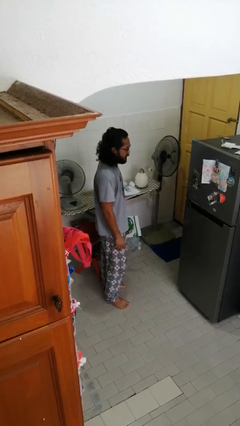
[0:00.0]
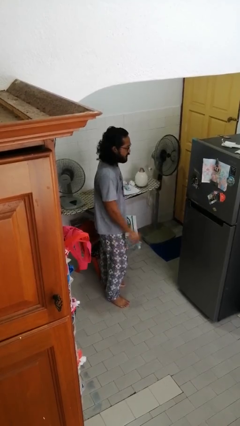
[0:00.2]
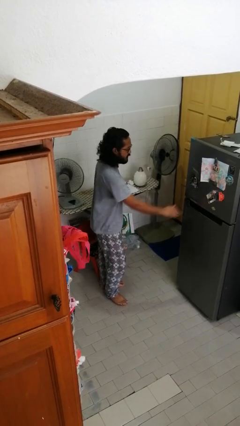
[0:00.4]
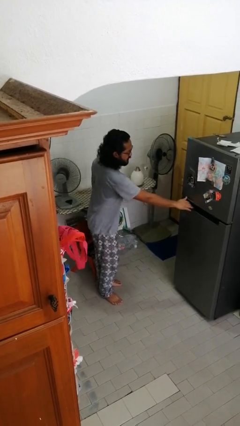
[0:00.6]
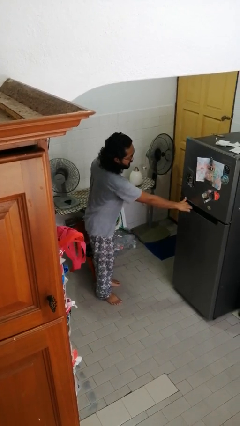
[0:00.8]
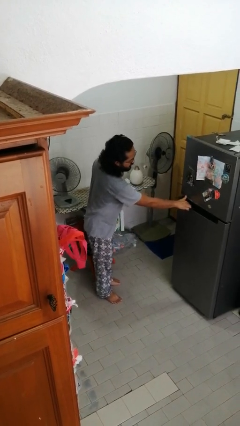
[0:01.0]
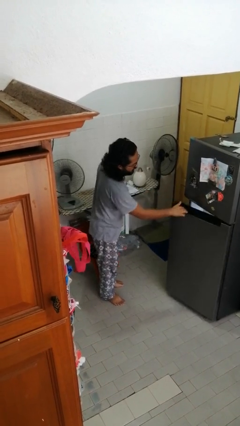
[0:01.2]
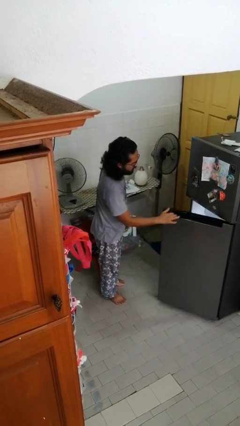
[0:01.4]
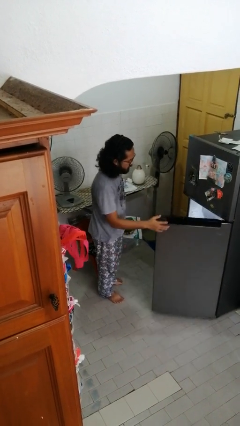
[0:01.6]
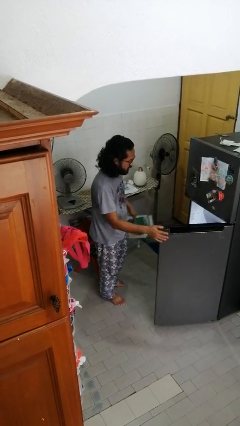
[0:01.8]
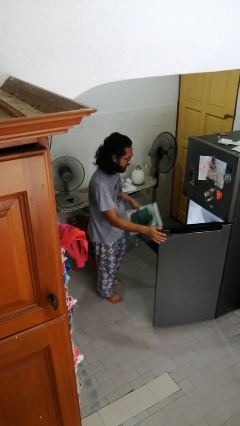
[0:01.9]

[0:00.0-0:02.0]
person opens refrigerator

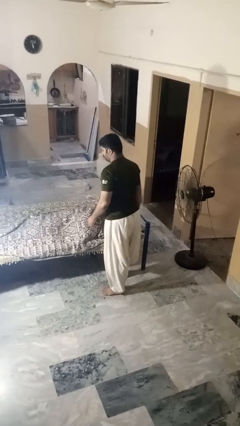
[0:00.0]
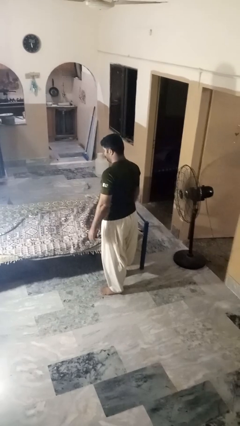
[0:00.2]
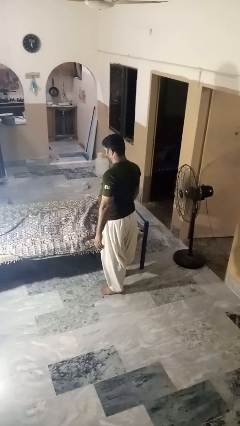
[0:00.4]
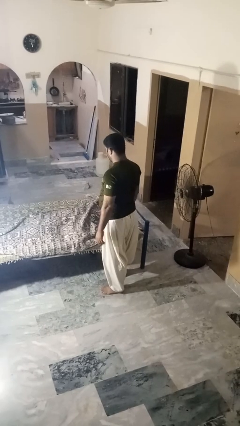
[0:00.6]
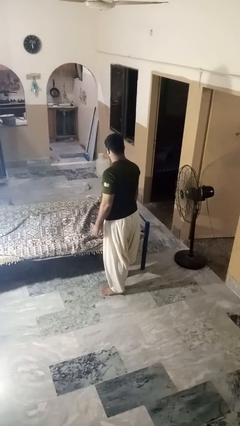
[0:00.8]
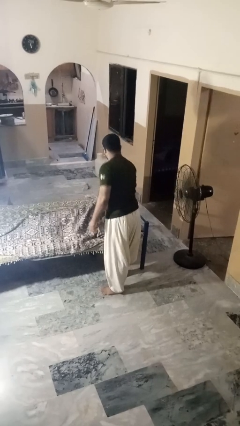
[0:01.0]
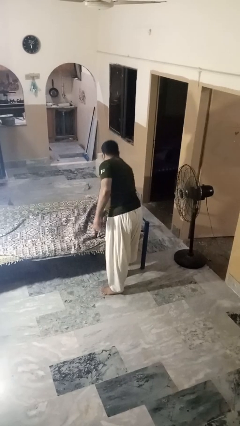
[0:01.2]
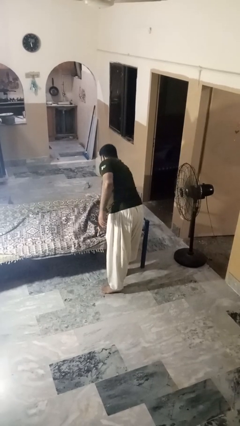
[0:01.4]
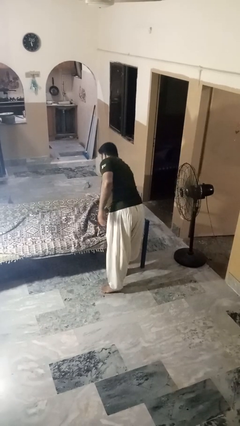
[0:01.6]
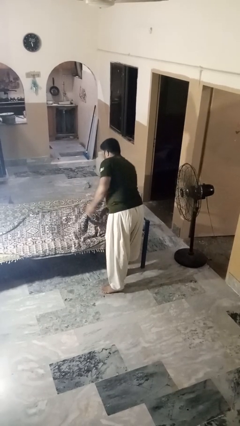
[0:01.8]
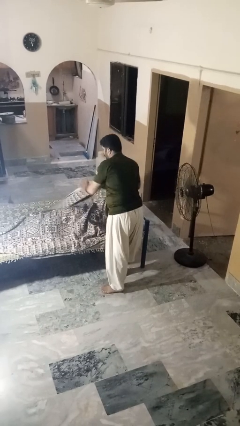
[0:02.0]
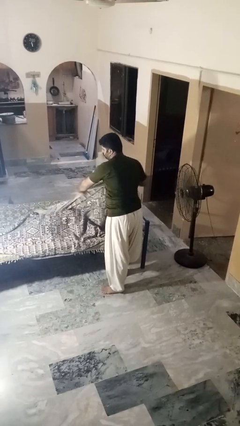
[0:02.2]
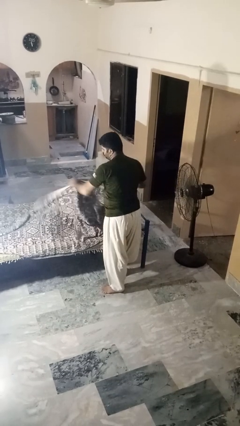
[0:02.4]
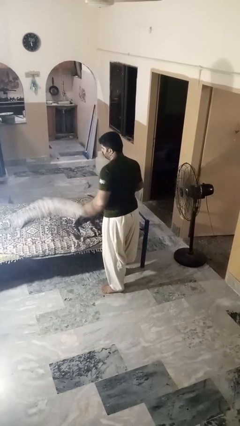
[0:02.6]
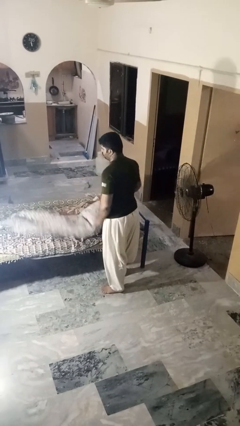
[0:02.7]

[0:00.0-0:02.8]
person uncovers friend with blanket

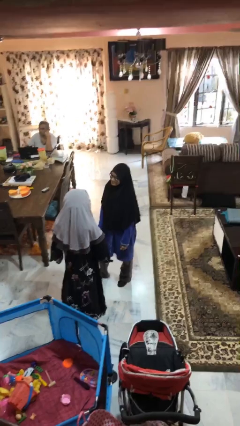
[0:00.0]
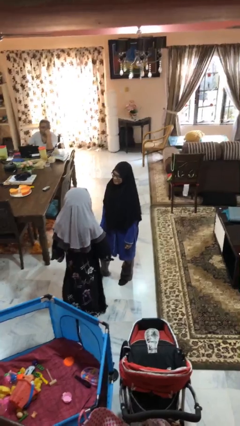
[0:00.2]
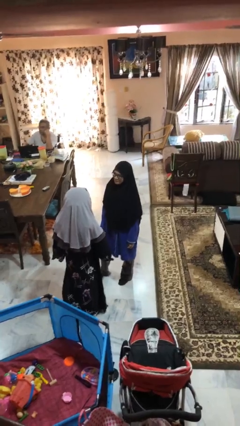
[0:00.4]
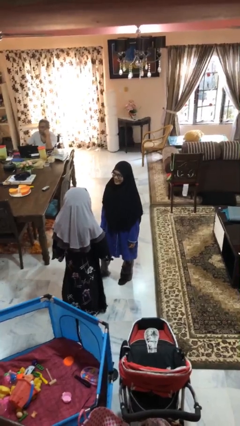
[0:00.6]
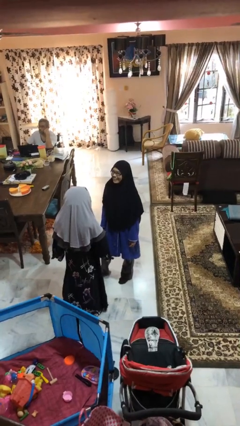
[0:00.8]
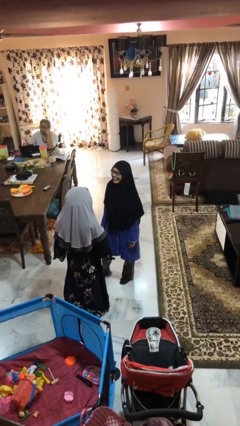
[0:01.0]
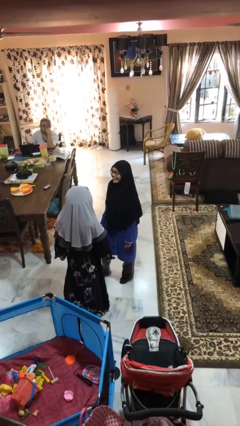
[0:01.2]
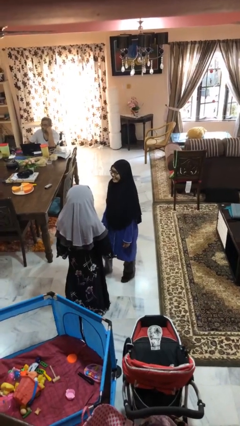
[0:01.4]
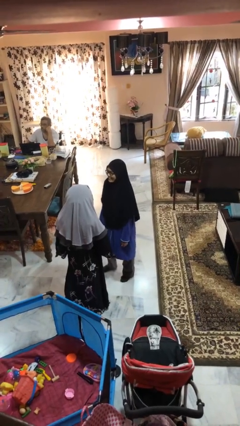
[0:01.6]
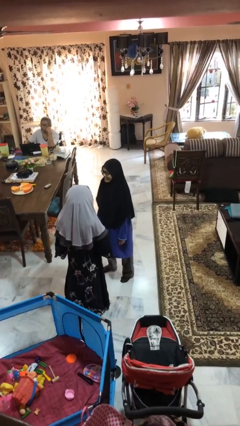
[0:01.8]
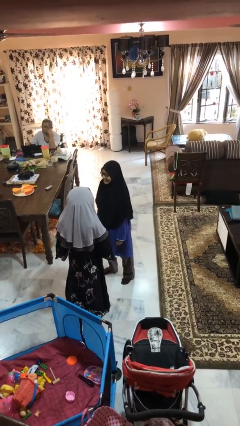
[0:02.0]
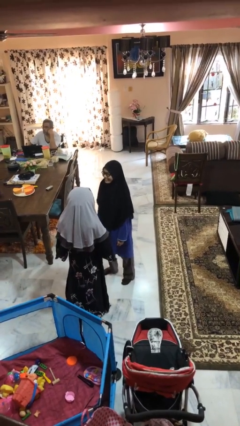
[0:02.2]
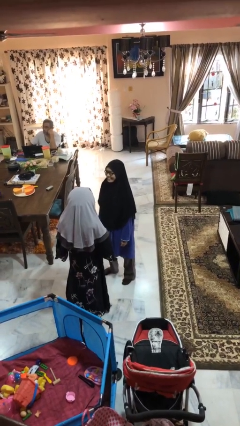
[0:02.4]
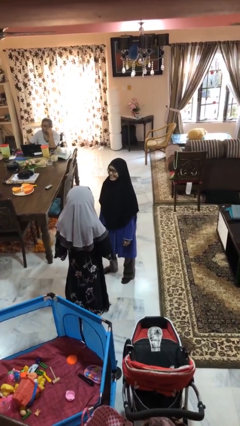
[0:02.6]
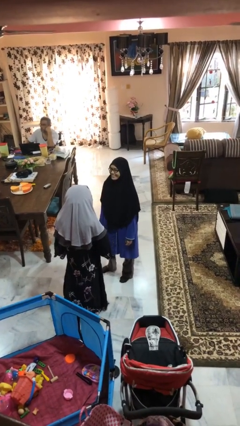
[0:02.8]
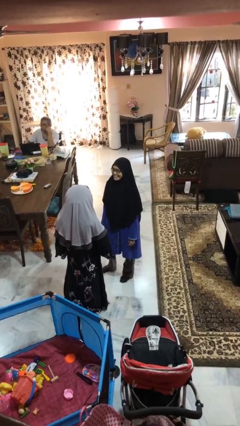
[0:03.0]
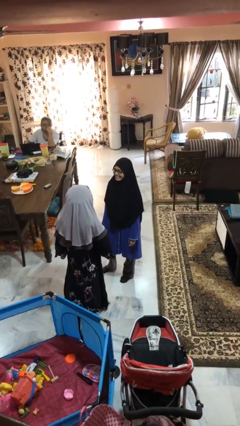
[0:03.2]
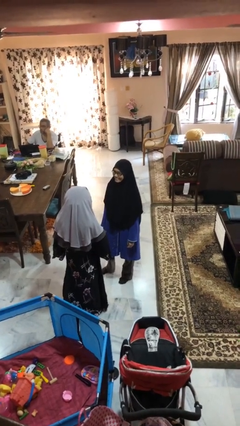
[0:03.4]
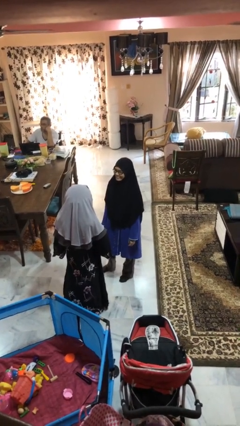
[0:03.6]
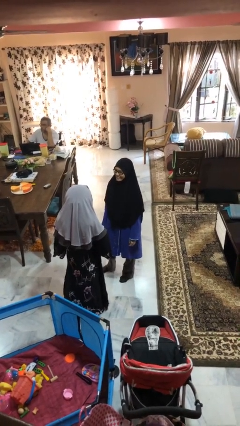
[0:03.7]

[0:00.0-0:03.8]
person laughs with person

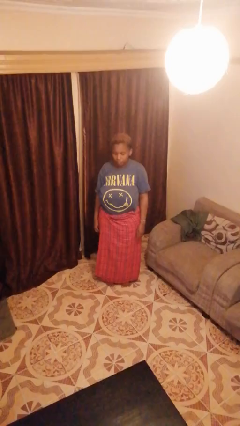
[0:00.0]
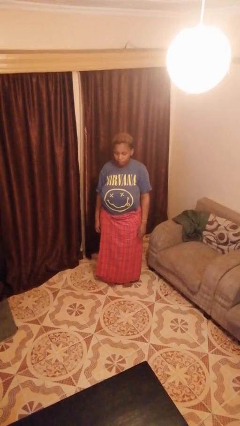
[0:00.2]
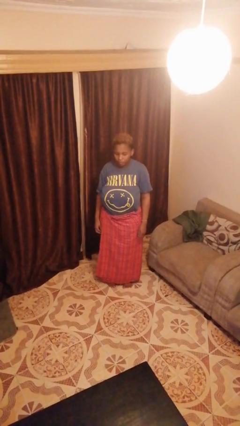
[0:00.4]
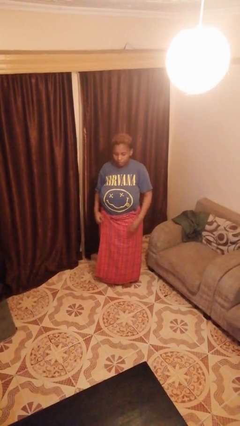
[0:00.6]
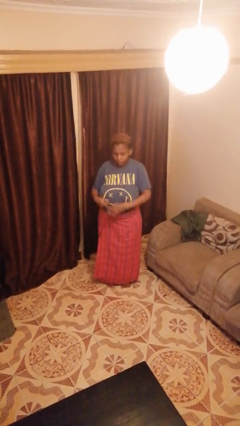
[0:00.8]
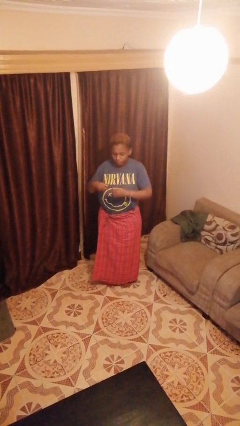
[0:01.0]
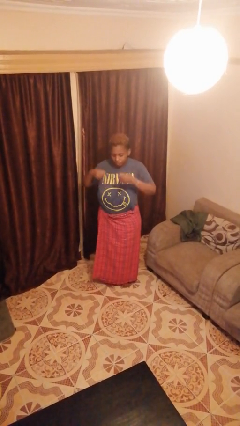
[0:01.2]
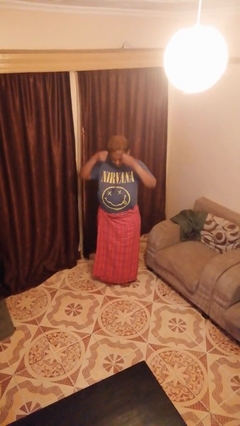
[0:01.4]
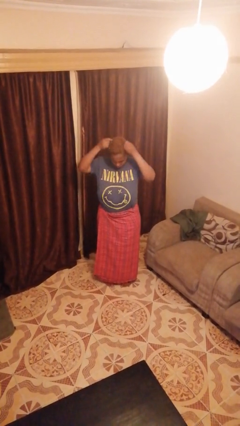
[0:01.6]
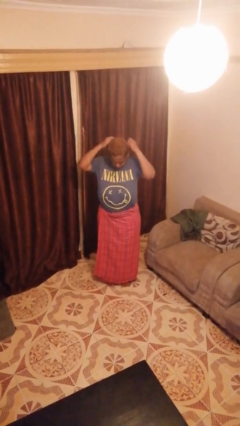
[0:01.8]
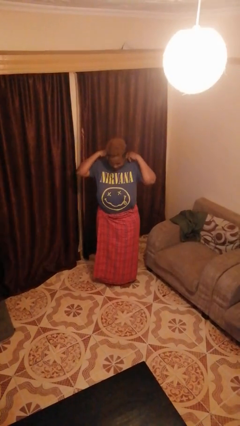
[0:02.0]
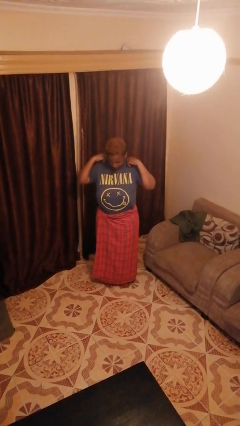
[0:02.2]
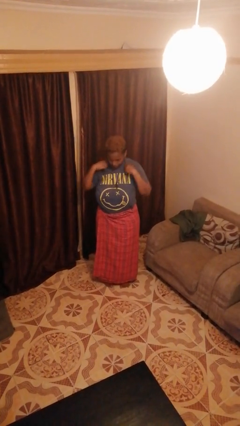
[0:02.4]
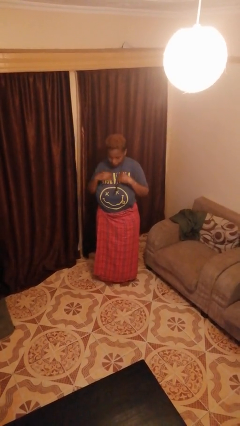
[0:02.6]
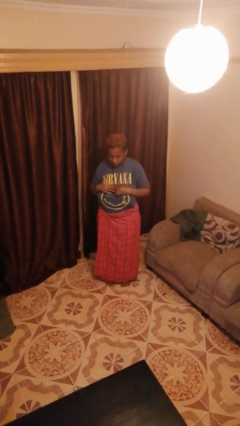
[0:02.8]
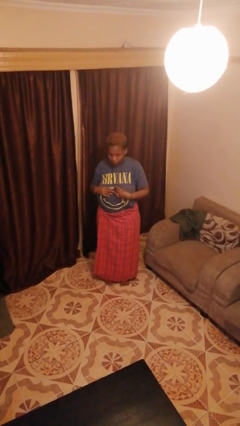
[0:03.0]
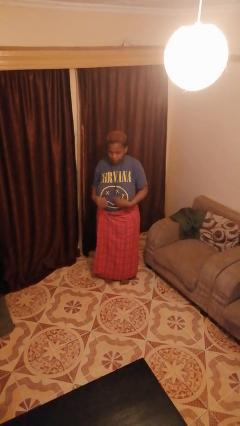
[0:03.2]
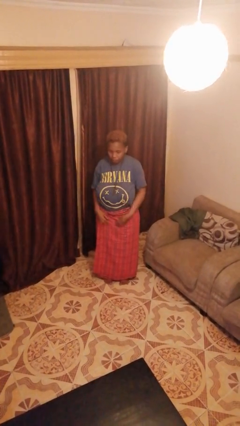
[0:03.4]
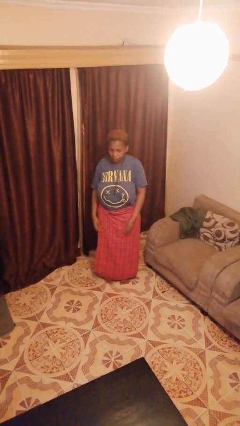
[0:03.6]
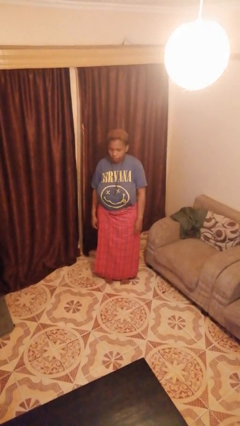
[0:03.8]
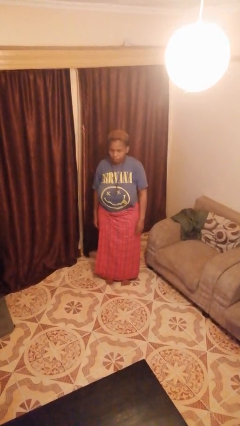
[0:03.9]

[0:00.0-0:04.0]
person puts on necklace

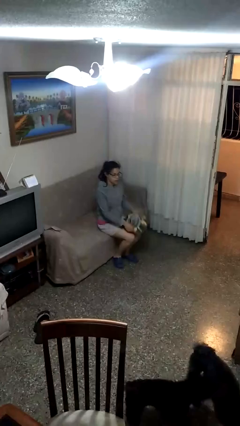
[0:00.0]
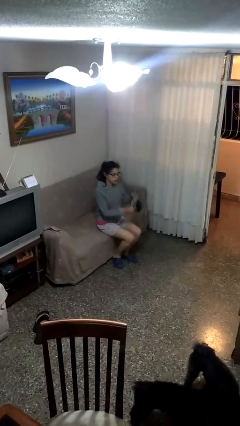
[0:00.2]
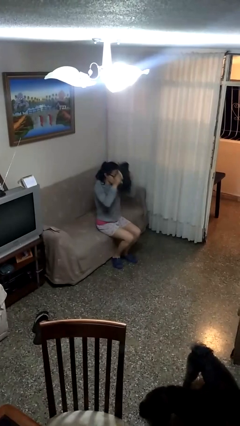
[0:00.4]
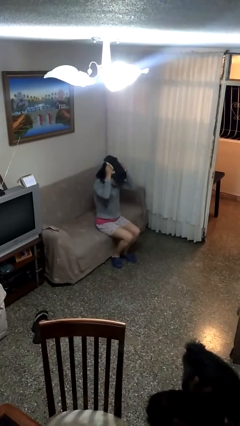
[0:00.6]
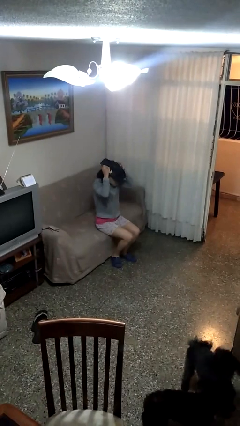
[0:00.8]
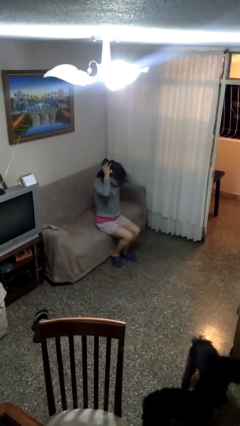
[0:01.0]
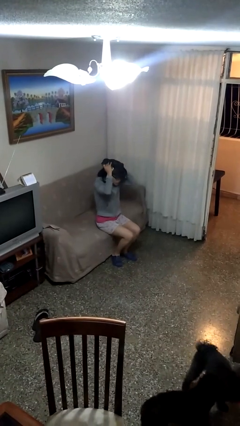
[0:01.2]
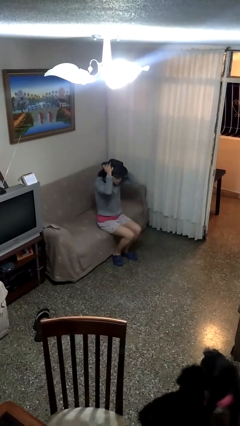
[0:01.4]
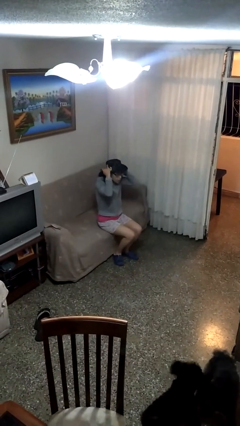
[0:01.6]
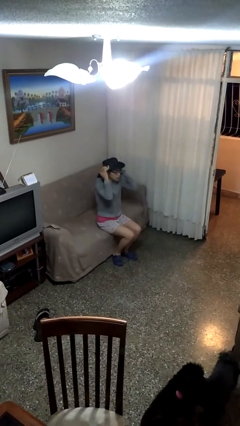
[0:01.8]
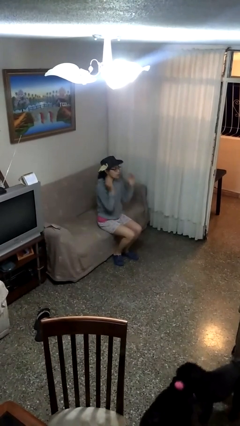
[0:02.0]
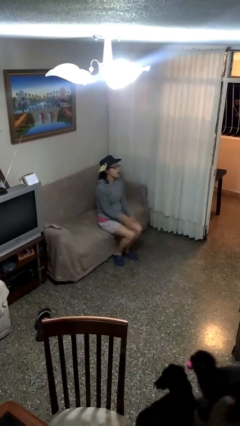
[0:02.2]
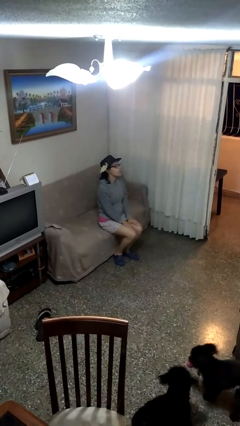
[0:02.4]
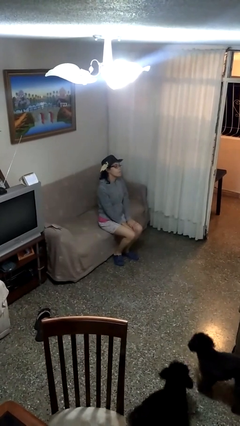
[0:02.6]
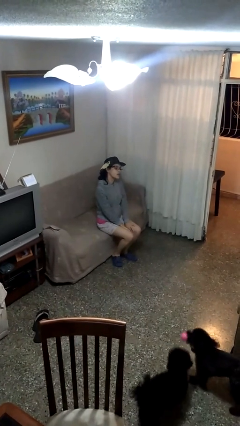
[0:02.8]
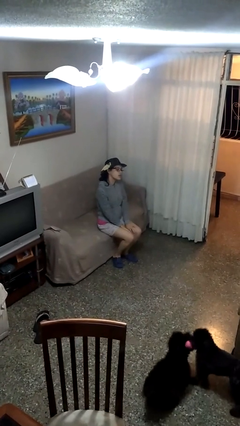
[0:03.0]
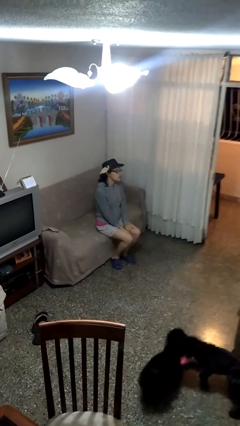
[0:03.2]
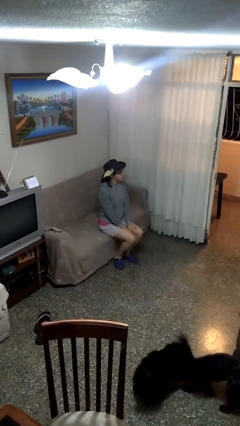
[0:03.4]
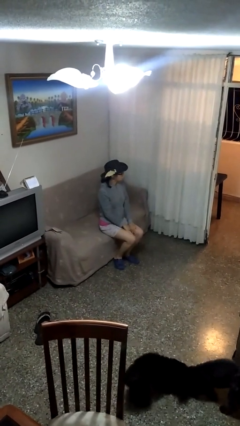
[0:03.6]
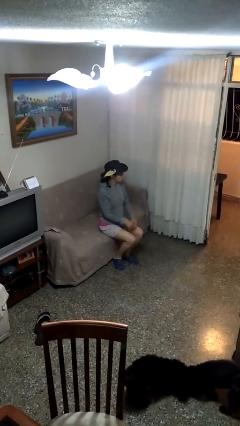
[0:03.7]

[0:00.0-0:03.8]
person puts on hat

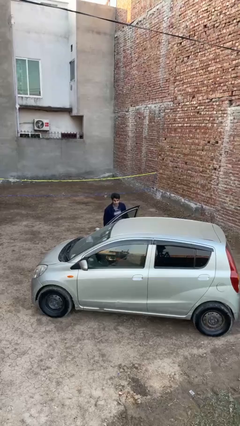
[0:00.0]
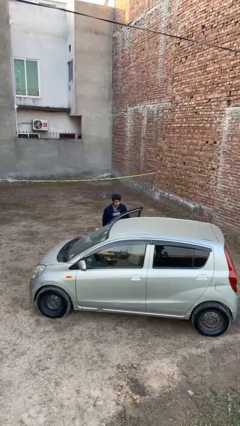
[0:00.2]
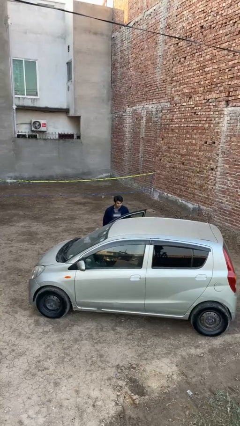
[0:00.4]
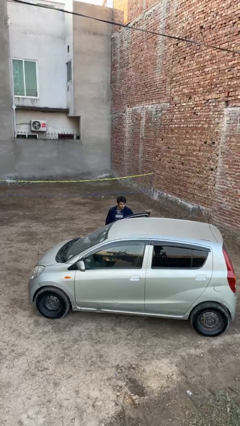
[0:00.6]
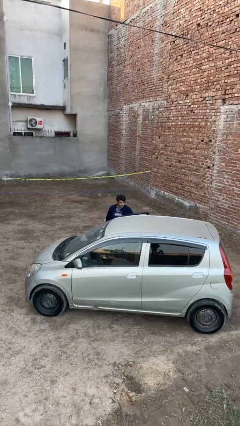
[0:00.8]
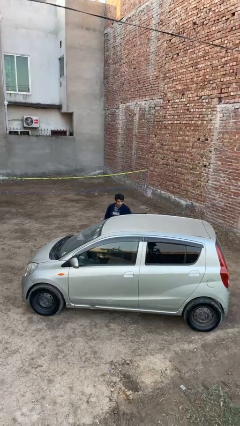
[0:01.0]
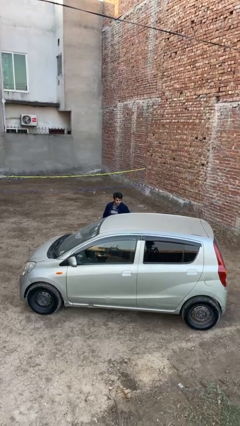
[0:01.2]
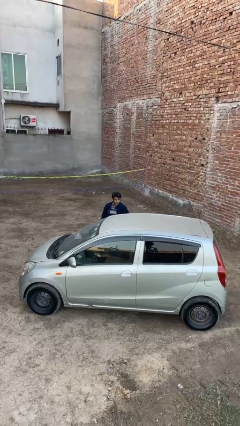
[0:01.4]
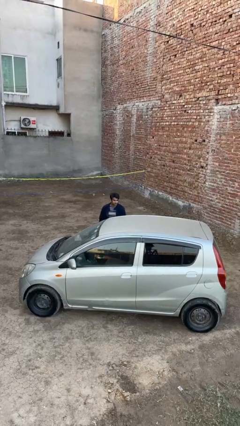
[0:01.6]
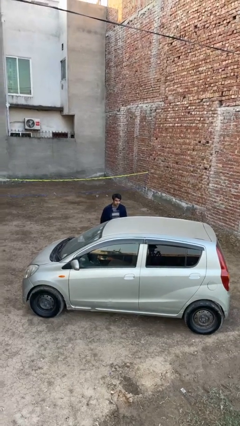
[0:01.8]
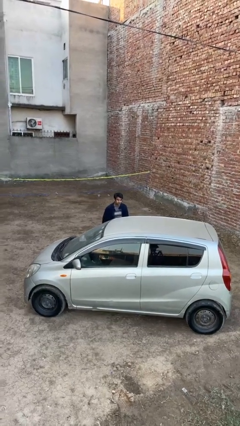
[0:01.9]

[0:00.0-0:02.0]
person closes car door
